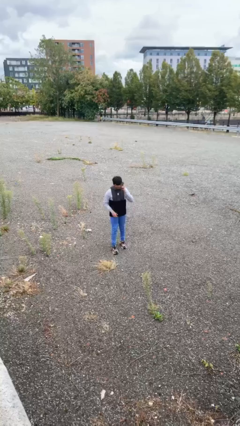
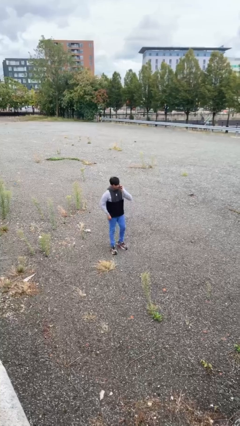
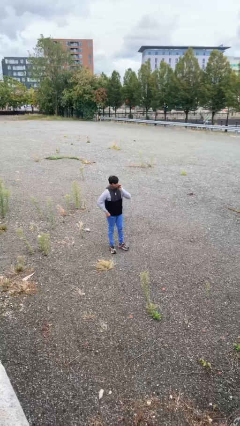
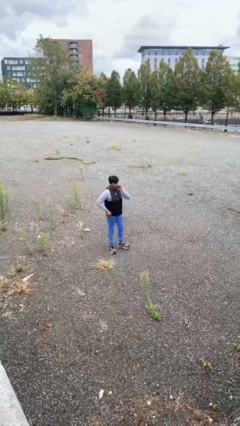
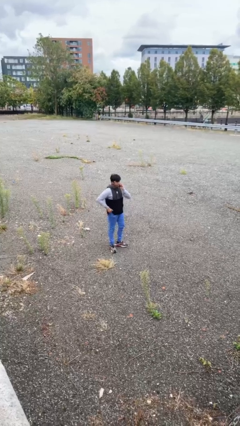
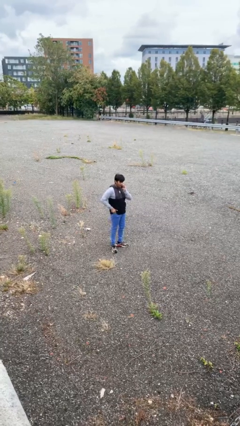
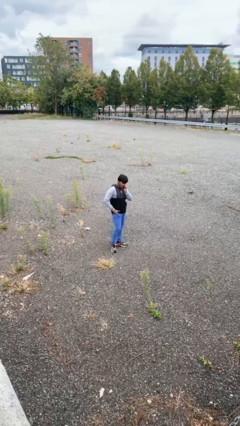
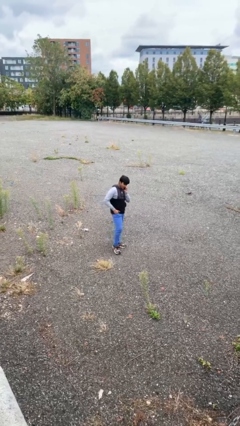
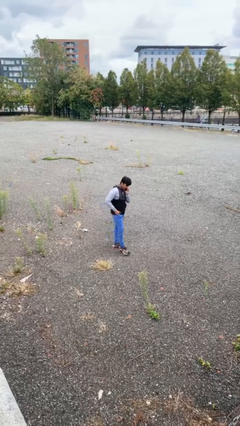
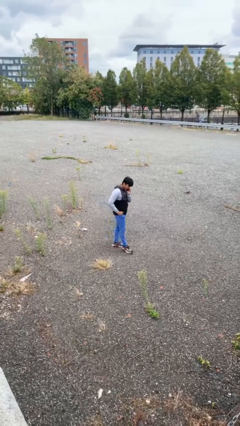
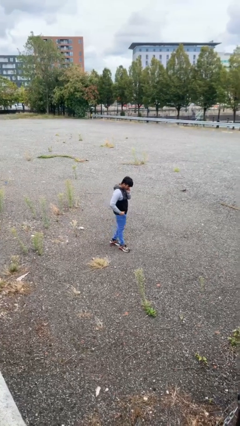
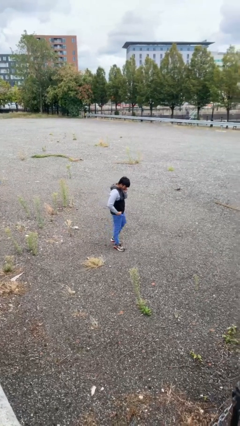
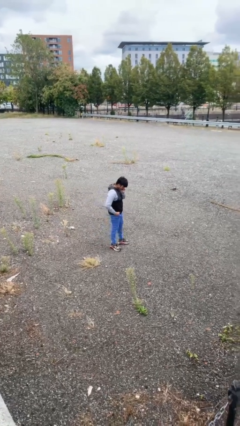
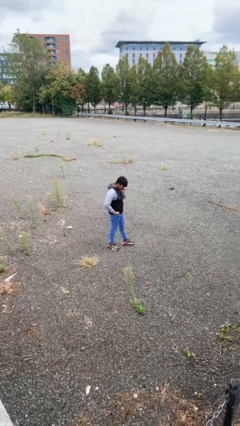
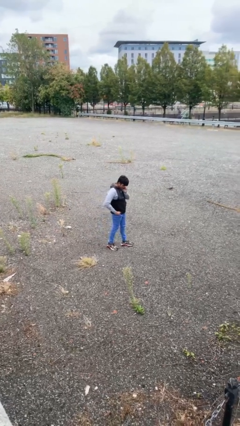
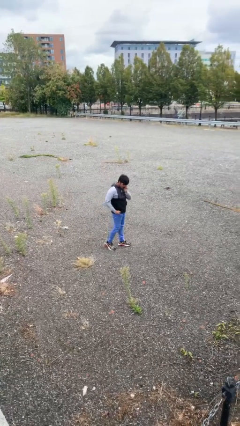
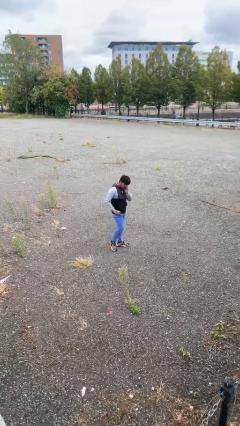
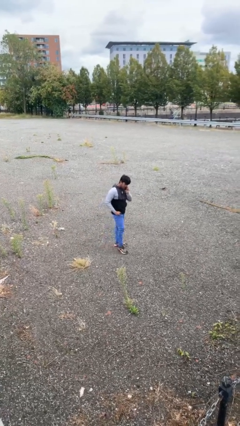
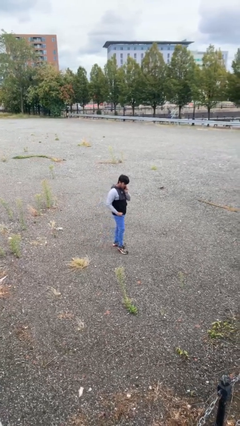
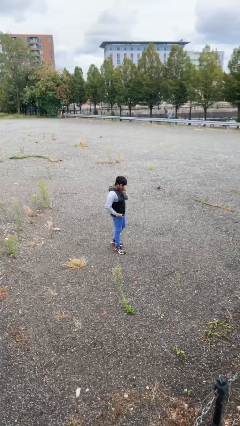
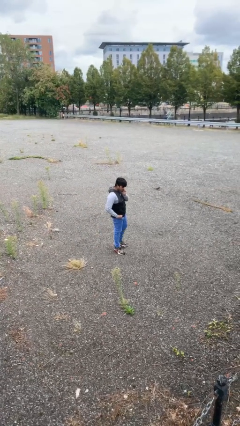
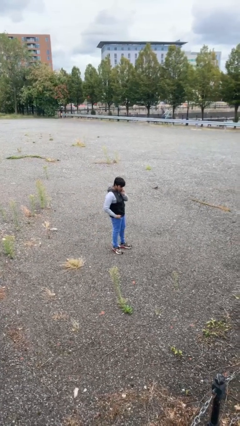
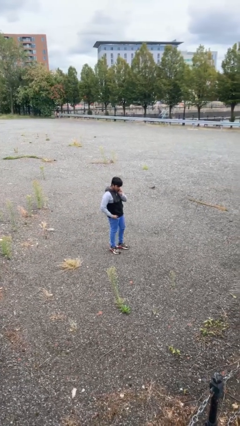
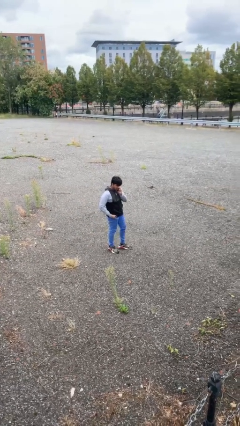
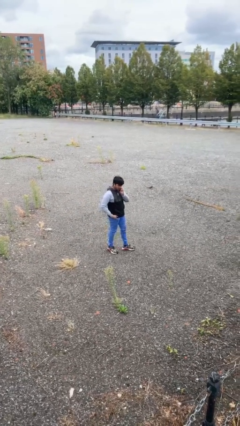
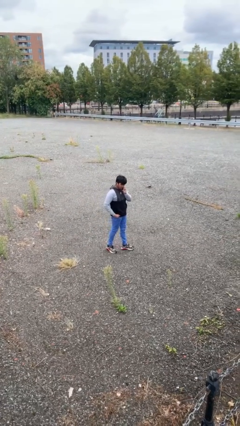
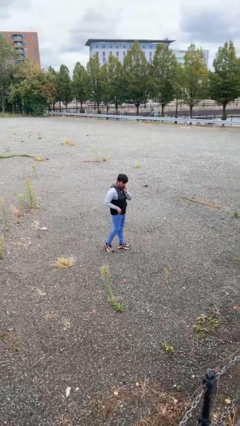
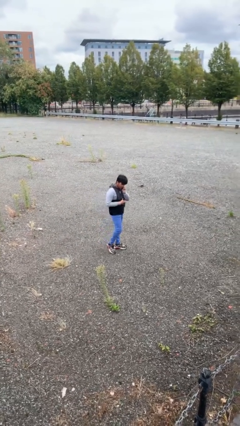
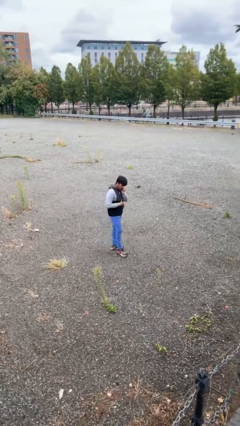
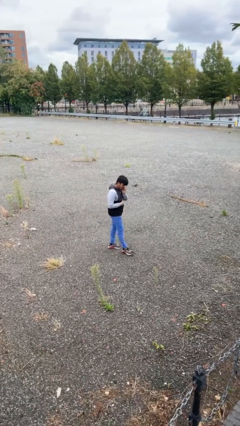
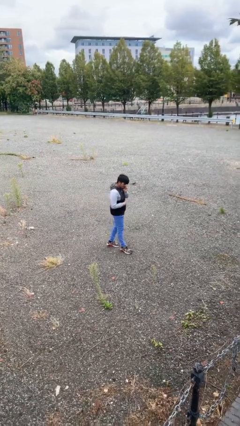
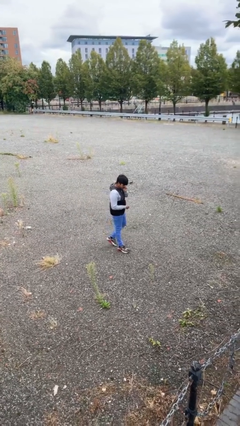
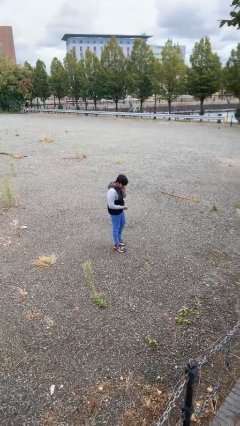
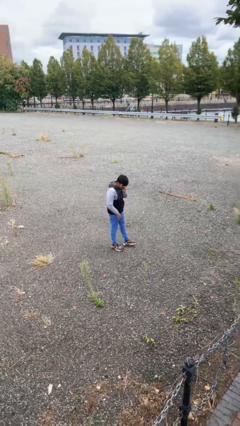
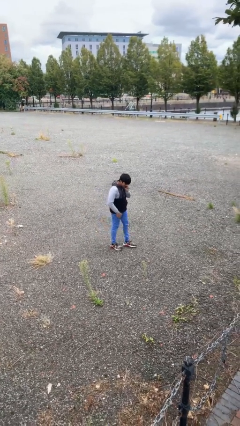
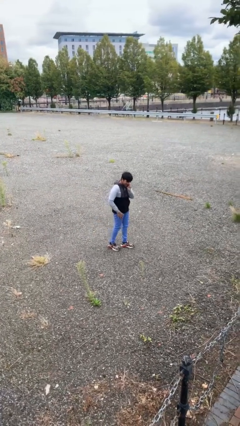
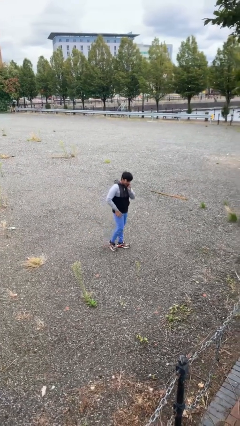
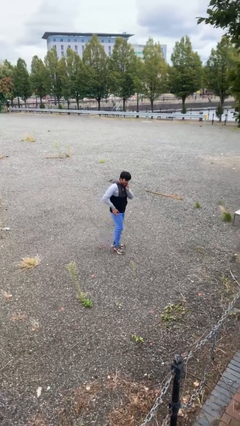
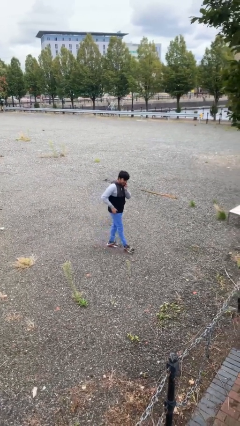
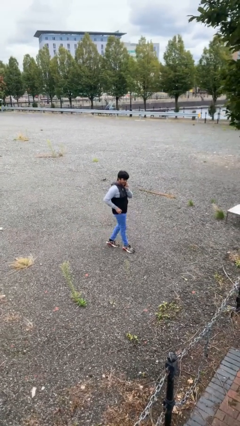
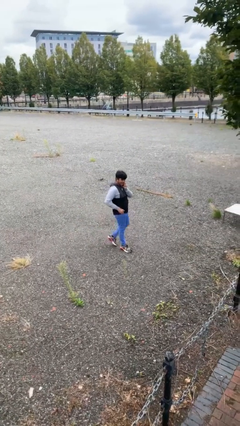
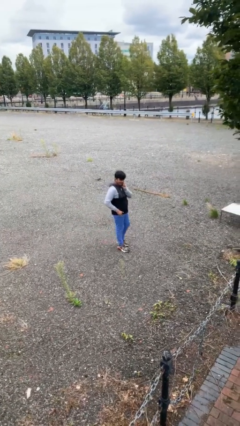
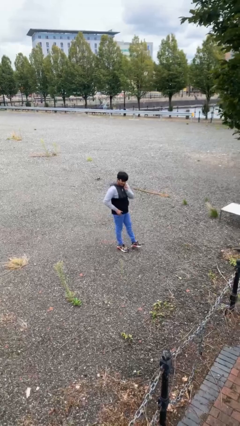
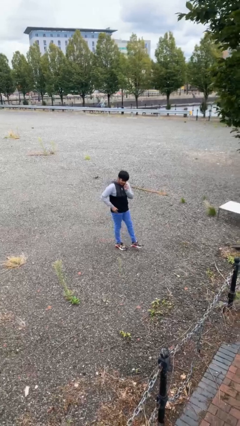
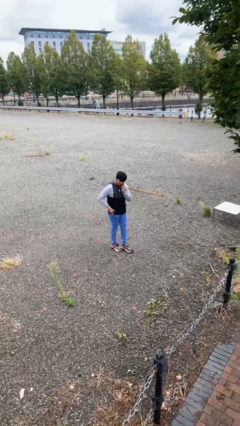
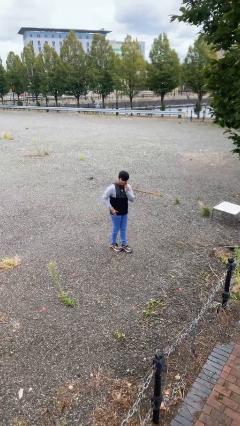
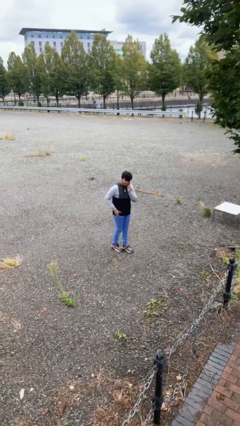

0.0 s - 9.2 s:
person talks on phone

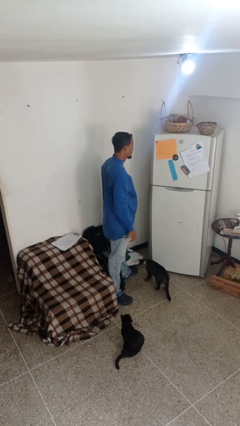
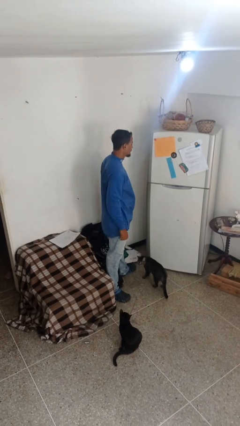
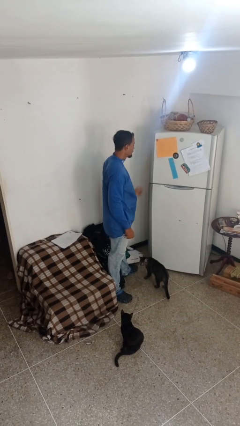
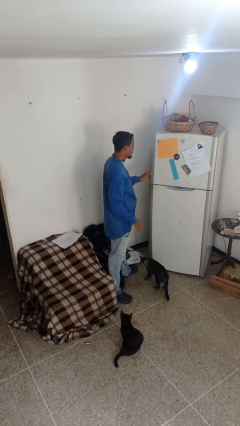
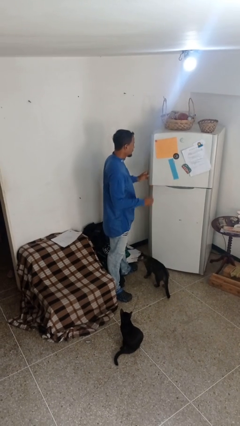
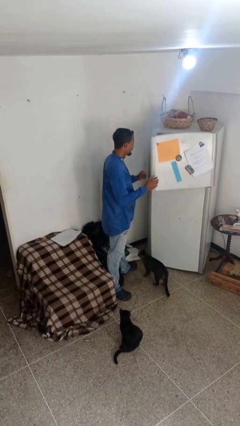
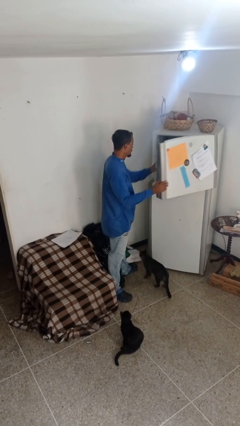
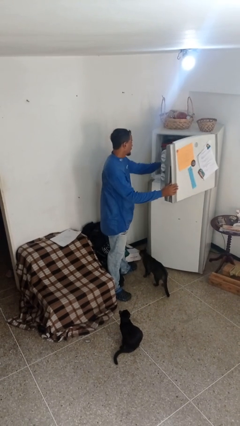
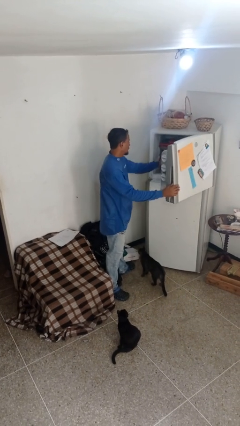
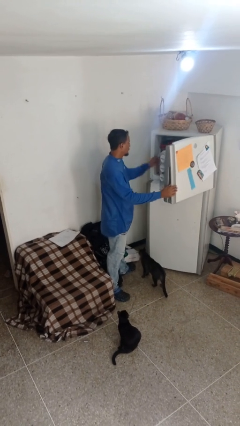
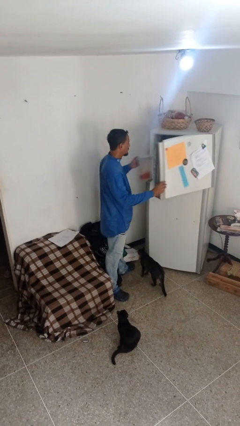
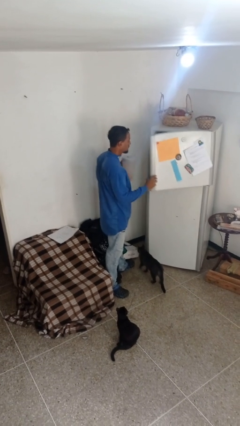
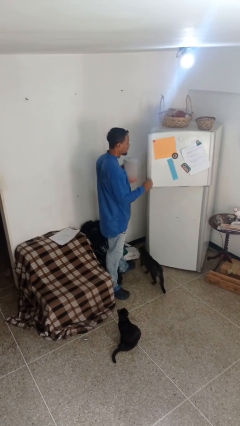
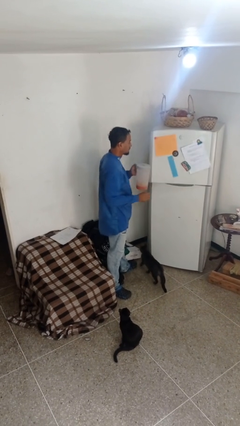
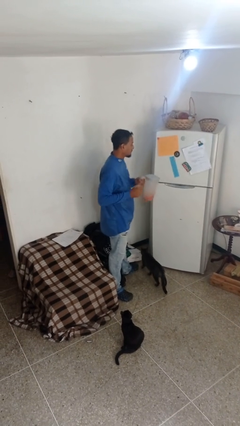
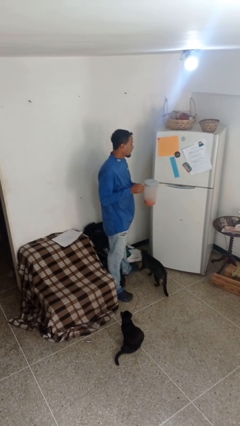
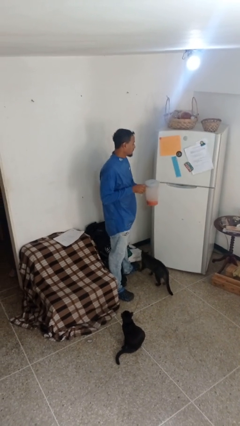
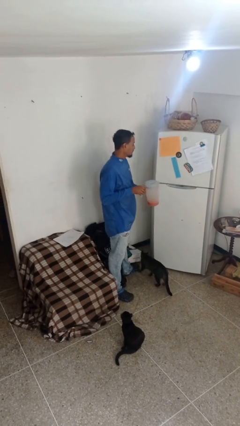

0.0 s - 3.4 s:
person takes object from refrigerator

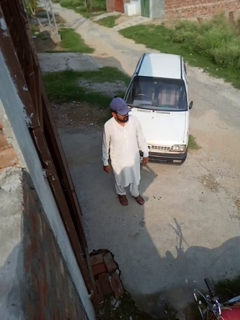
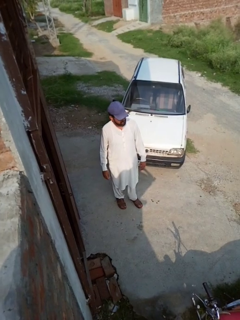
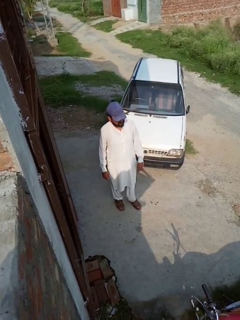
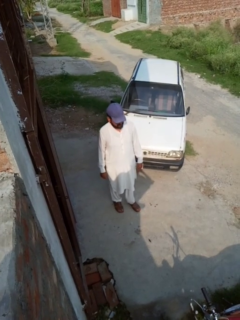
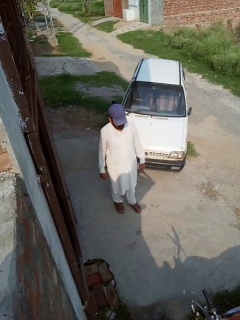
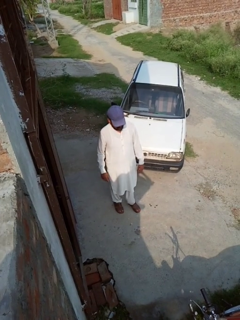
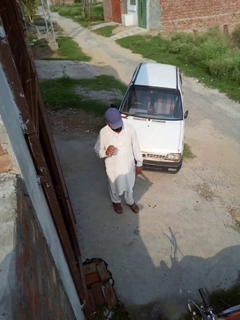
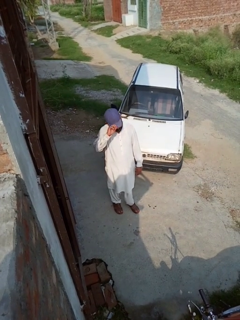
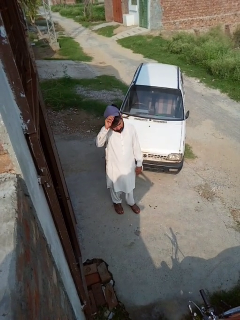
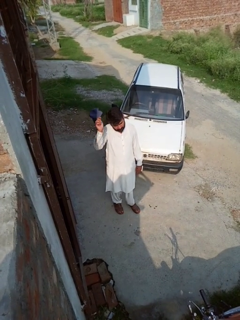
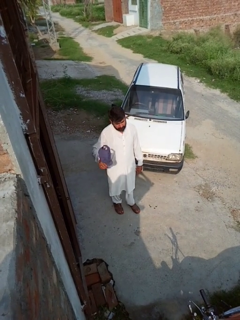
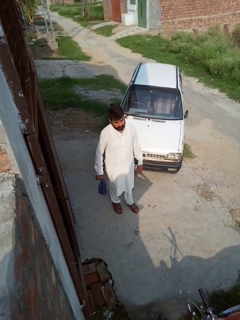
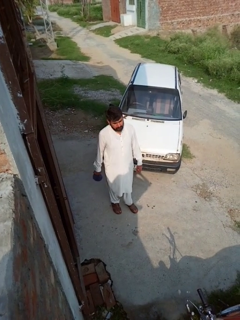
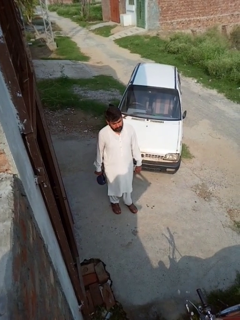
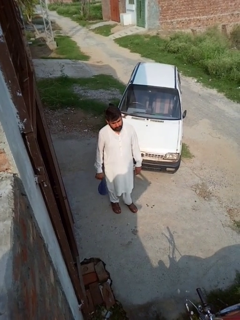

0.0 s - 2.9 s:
person takes off hat

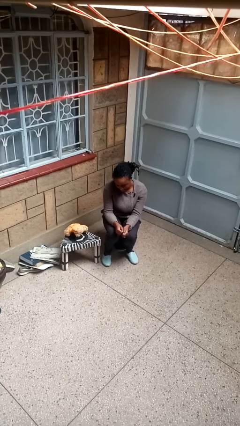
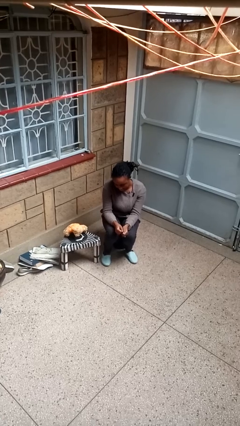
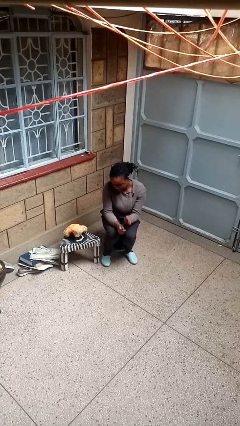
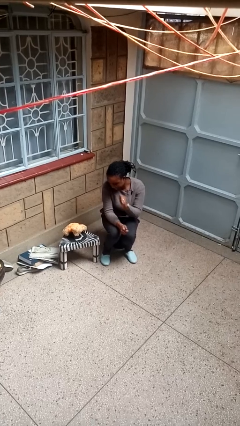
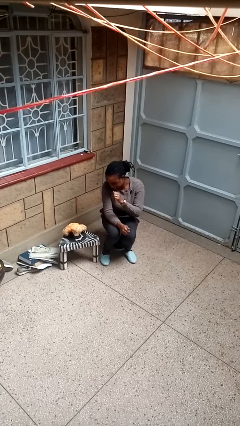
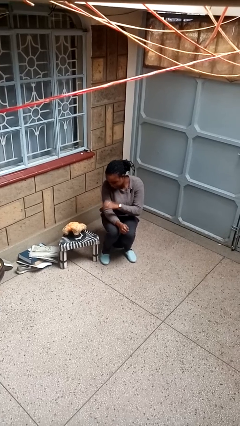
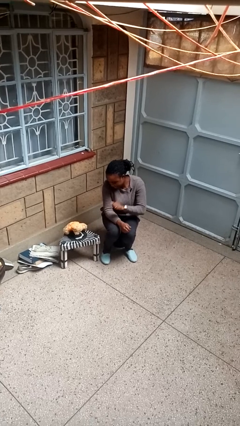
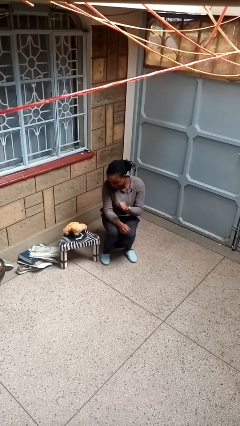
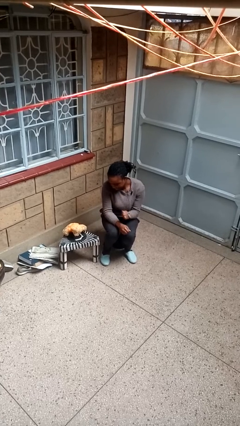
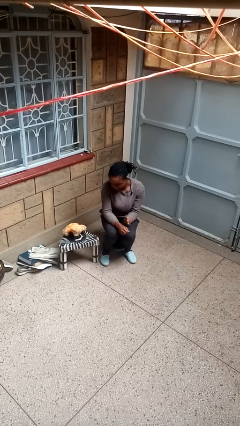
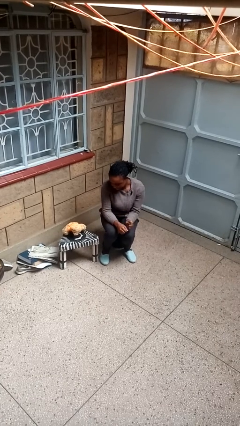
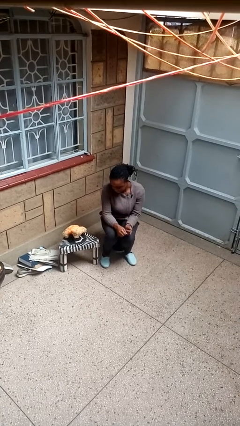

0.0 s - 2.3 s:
person swats bug

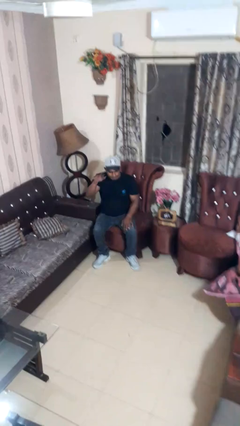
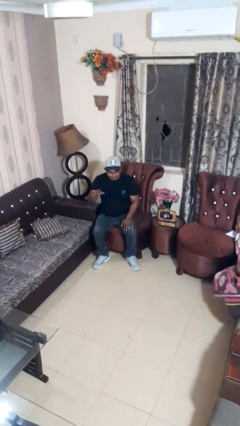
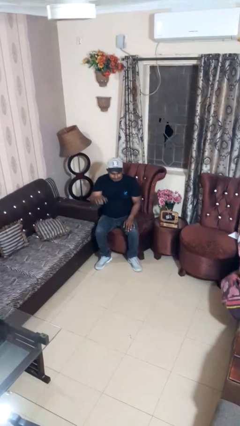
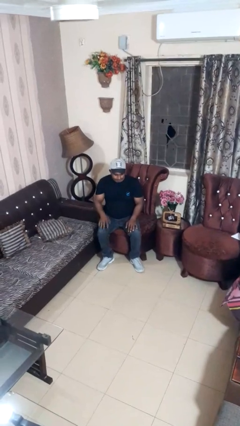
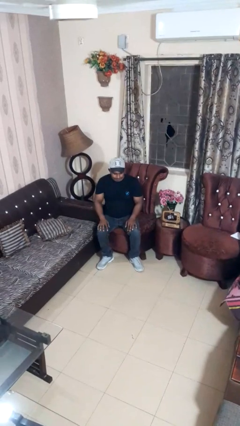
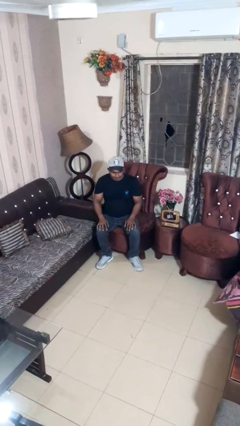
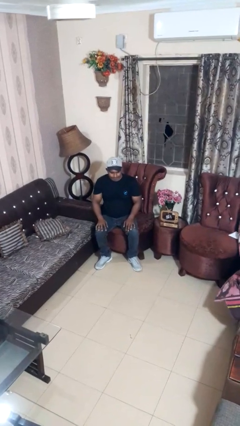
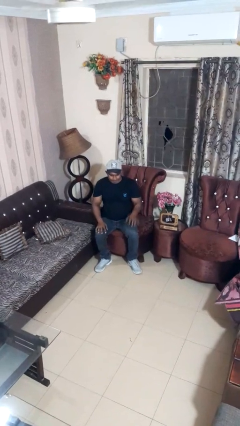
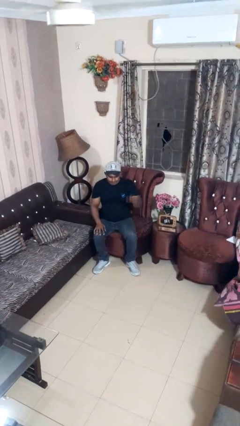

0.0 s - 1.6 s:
person gestures lower hand
